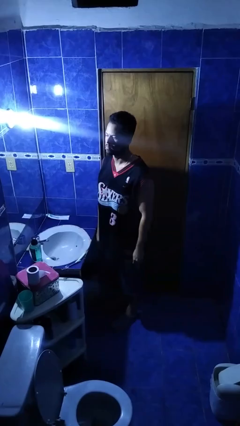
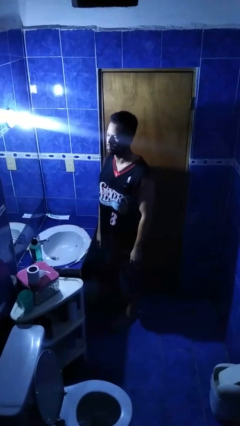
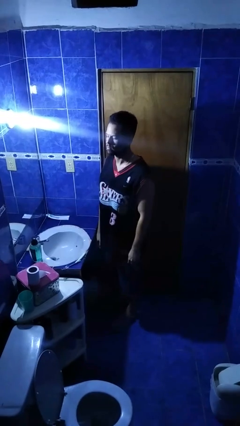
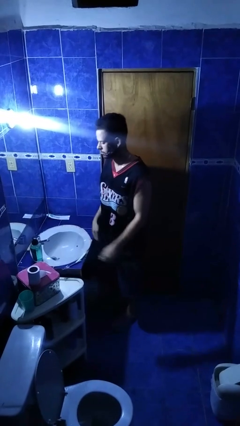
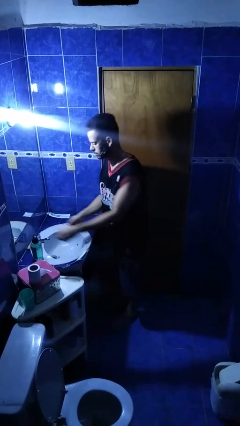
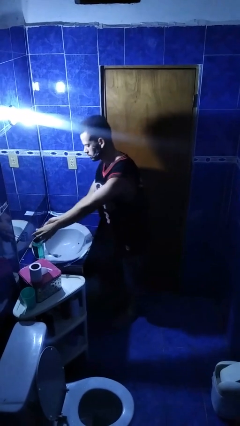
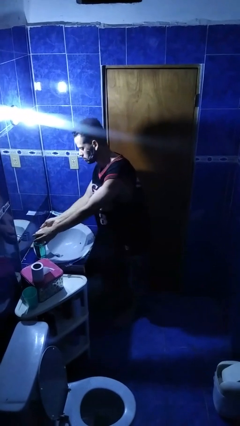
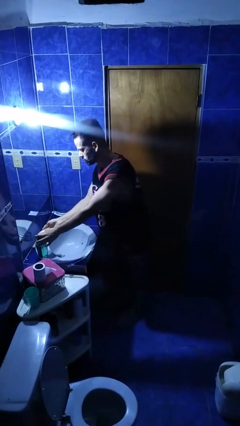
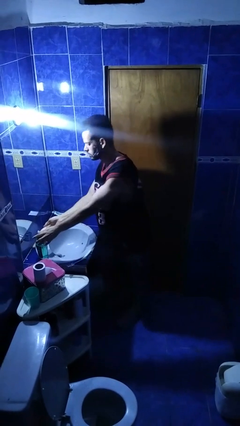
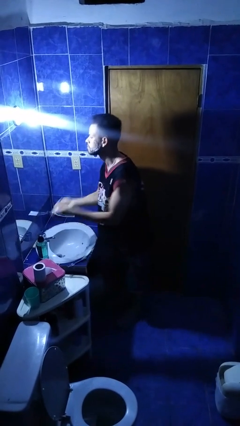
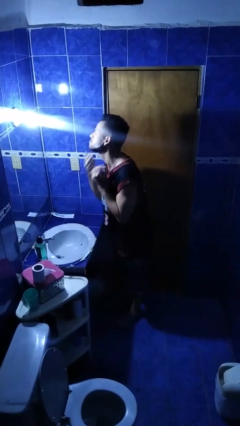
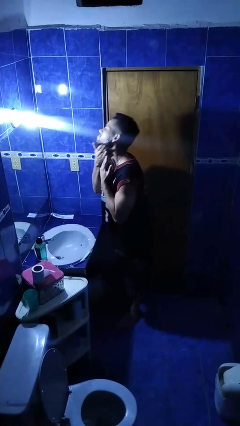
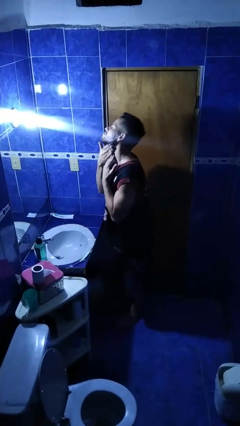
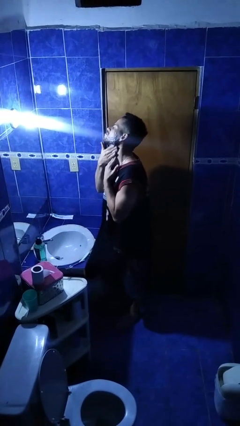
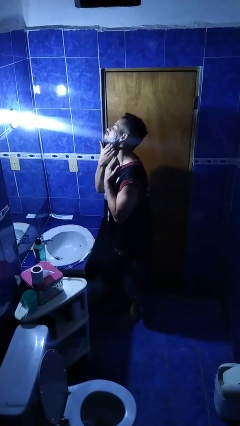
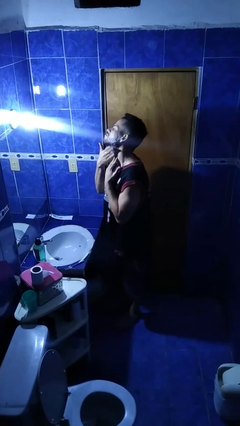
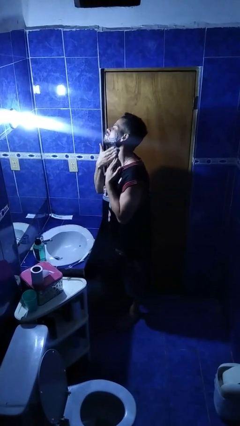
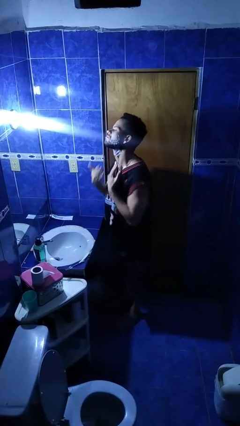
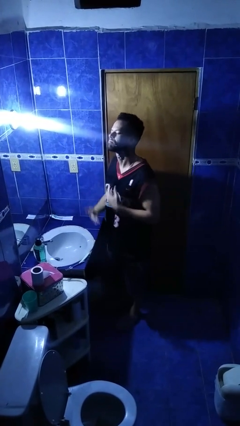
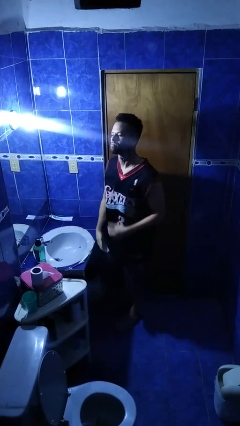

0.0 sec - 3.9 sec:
person applies shaving cream

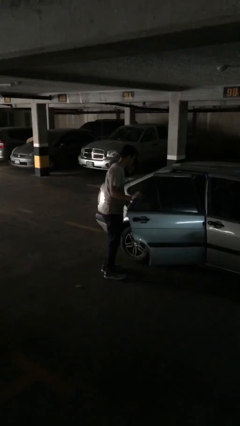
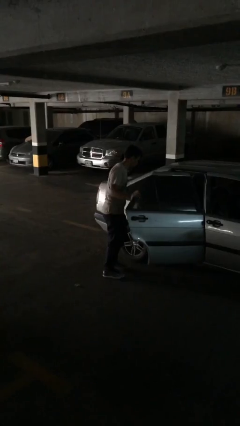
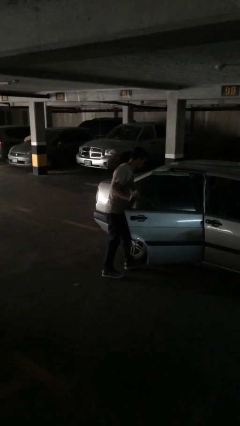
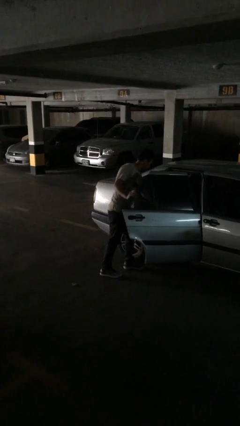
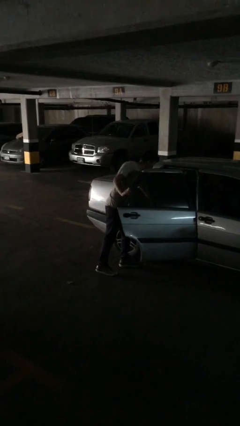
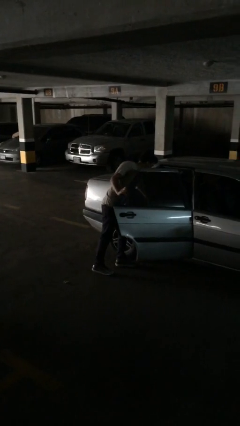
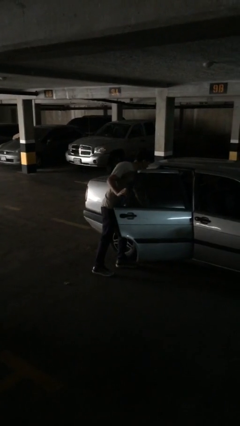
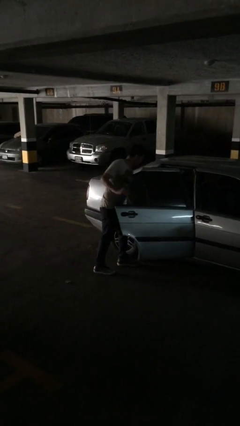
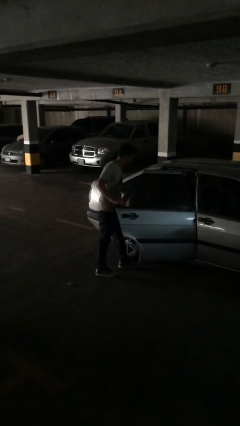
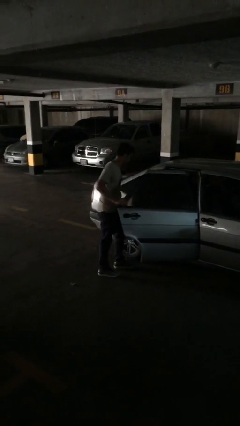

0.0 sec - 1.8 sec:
person loads car

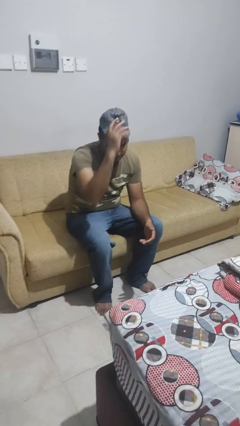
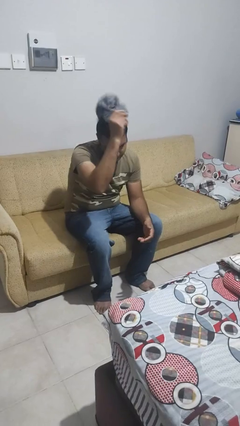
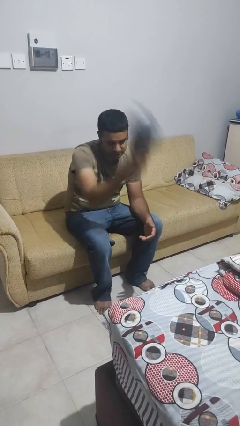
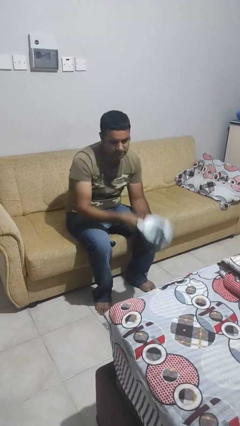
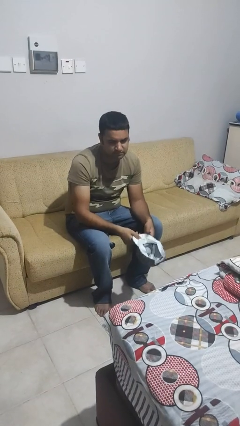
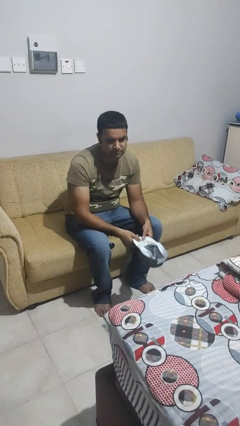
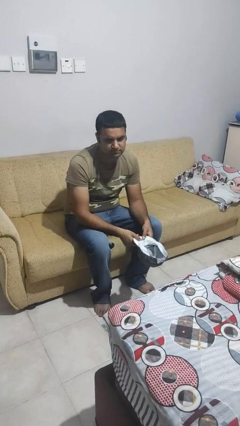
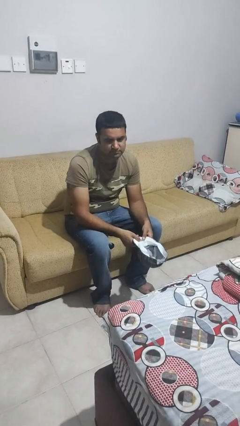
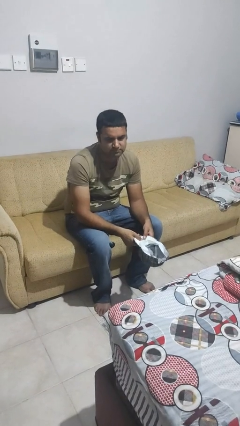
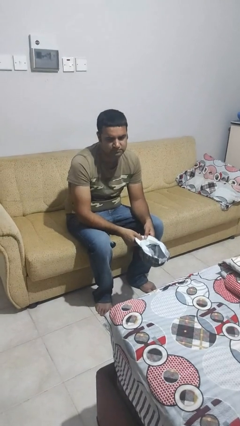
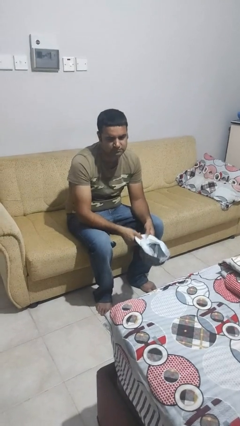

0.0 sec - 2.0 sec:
person takes off hat

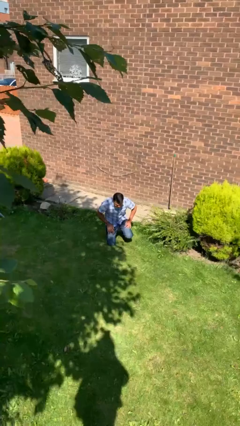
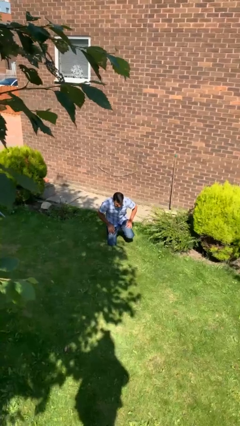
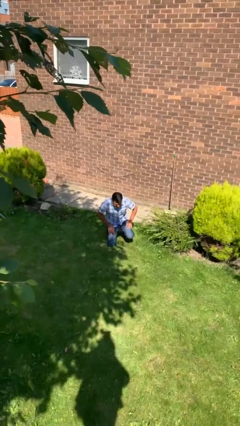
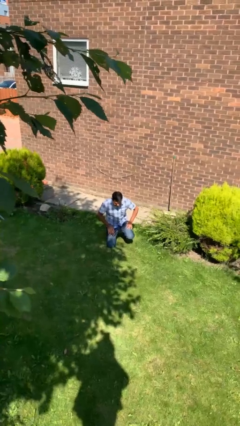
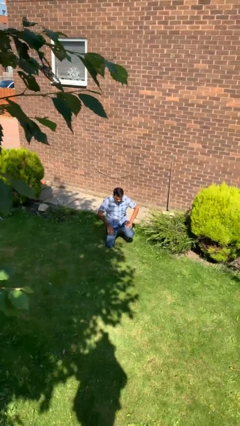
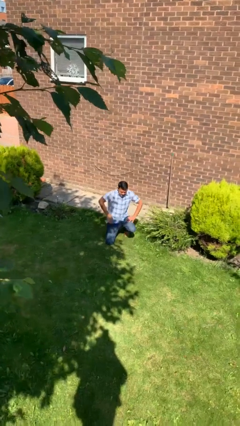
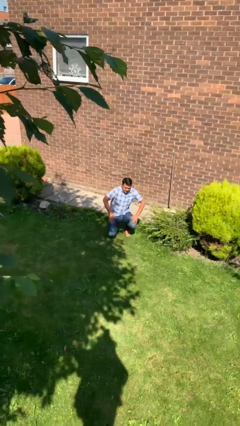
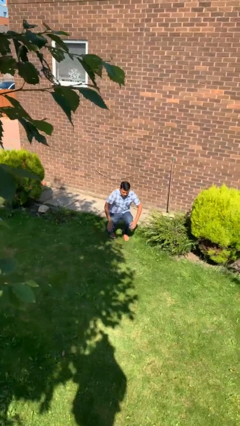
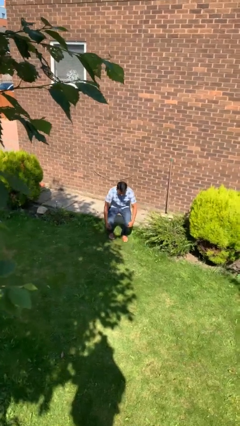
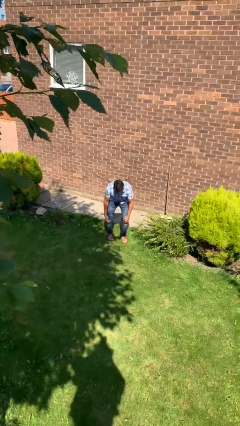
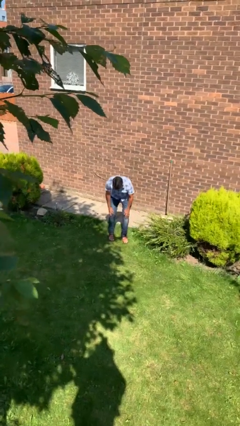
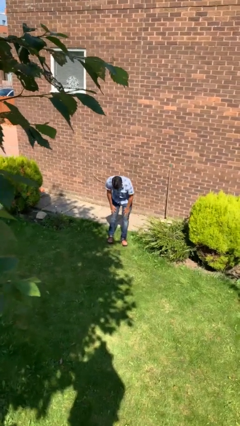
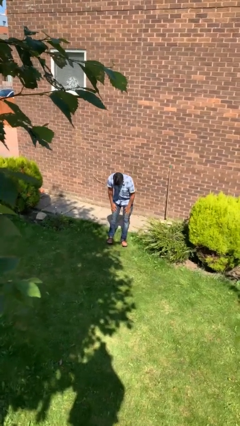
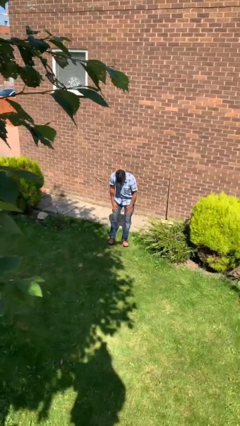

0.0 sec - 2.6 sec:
person stands up from floor

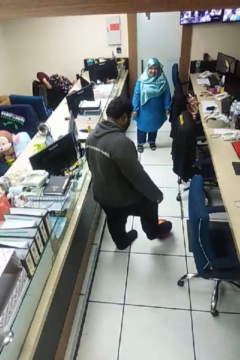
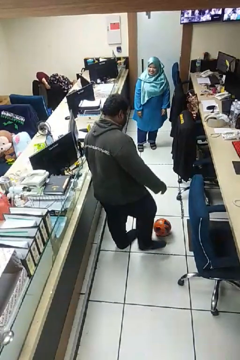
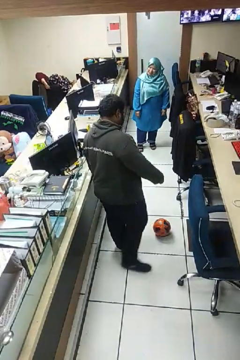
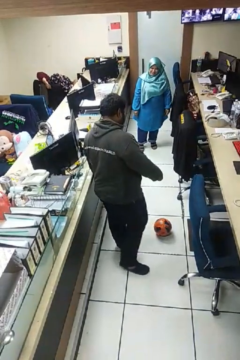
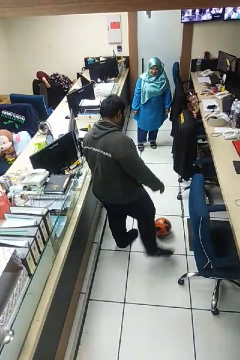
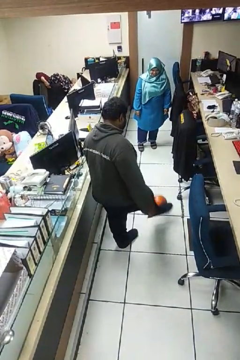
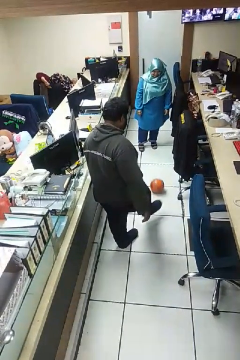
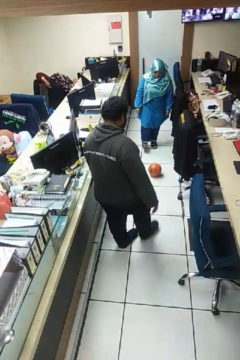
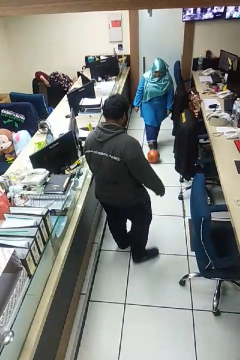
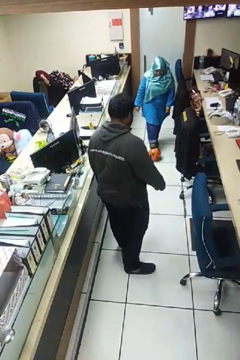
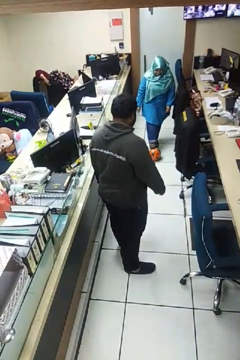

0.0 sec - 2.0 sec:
person kicks object to person

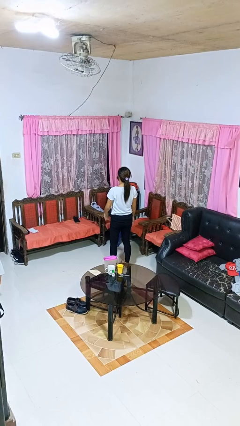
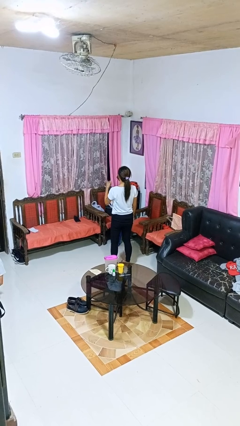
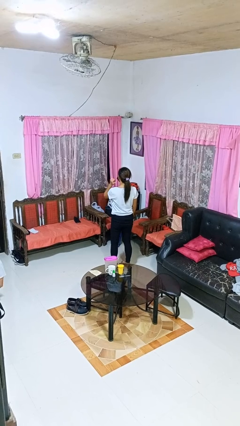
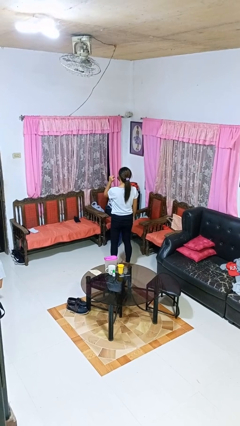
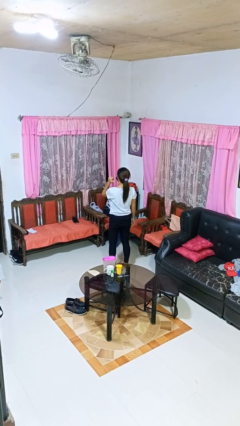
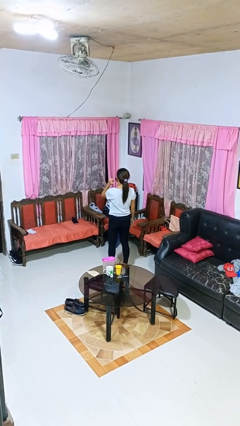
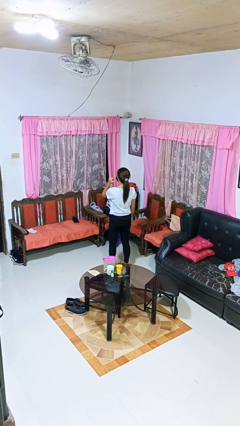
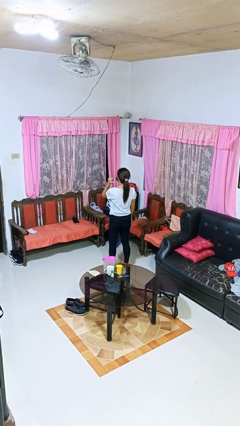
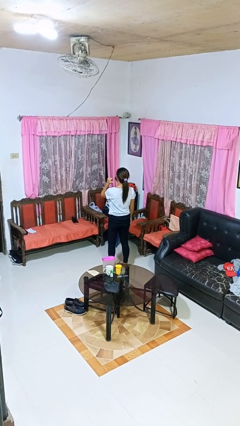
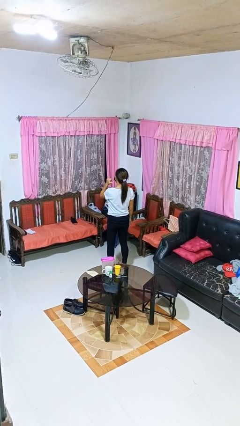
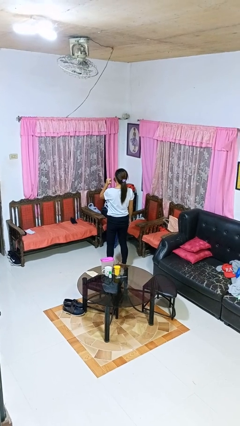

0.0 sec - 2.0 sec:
person gestures behind me

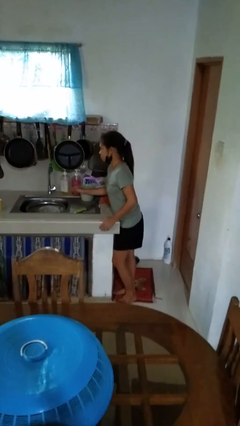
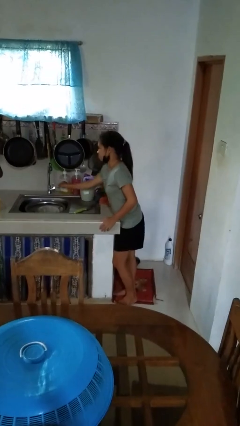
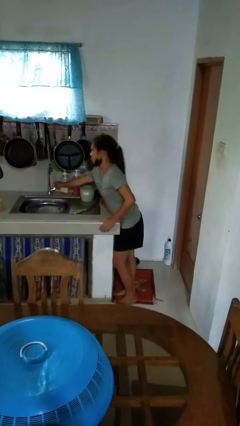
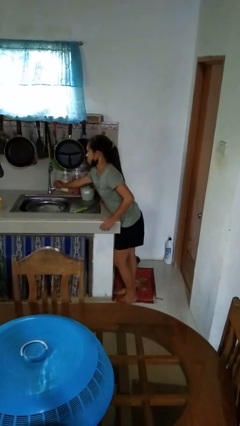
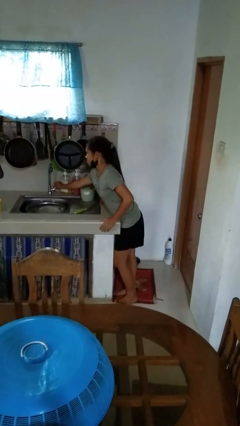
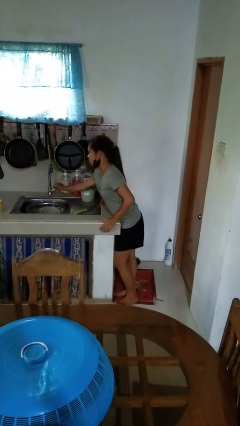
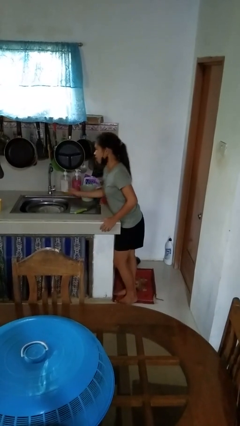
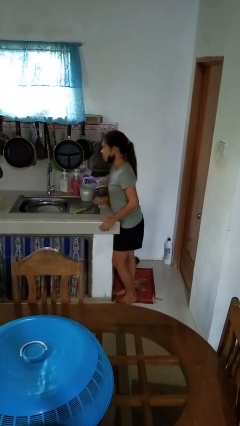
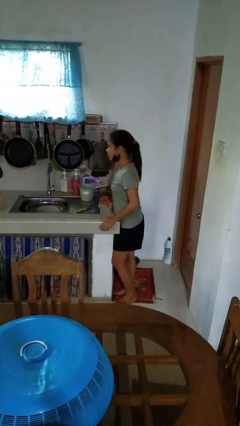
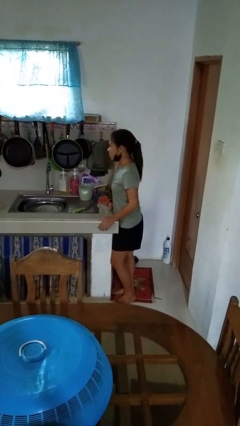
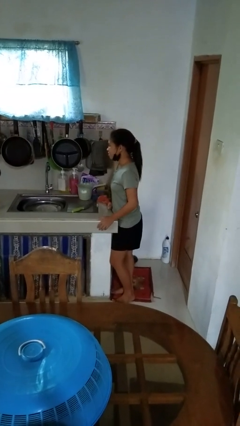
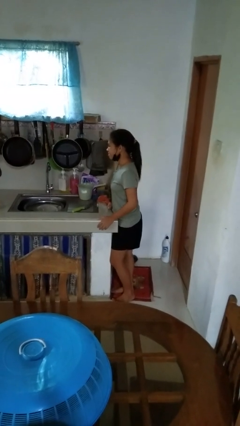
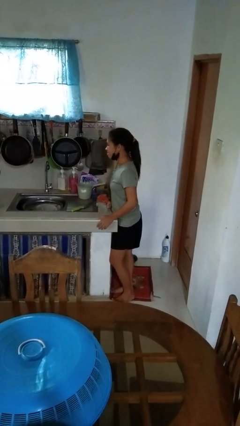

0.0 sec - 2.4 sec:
person turns on faucet

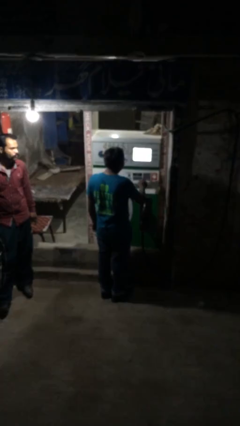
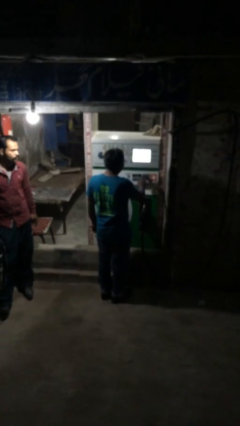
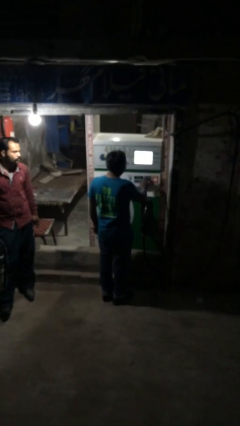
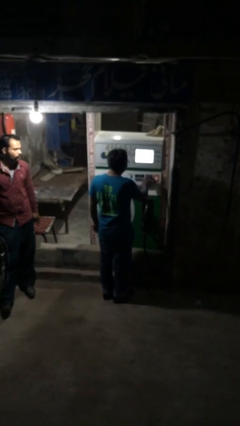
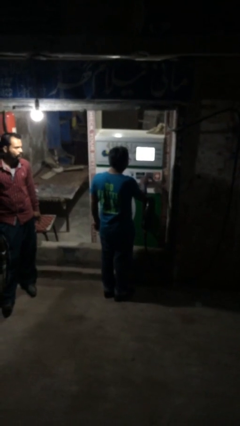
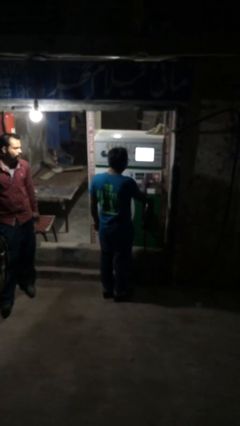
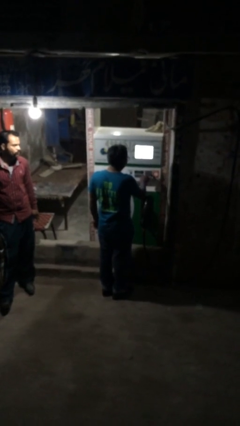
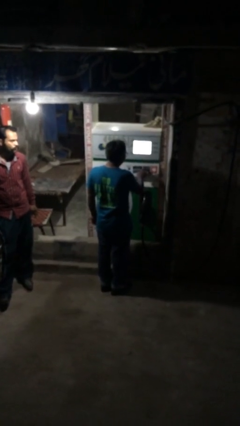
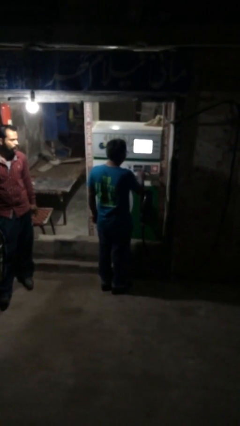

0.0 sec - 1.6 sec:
person purchases from machine
